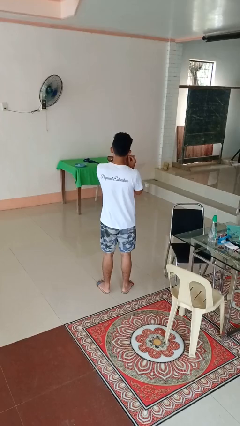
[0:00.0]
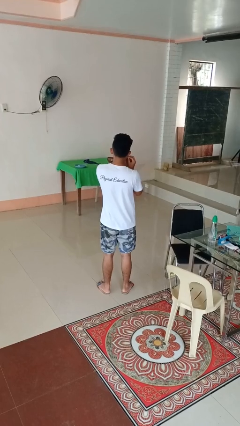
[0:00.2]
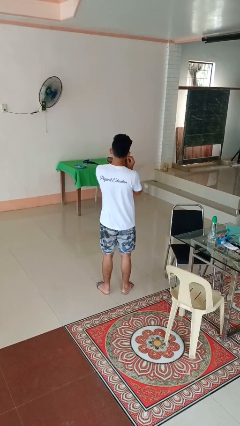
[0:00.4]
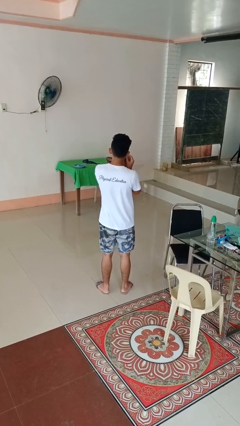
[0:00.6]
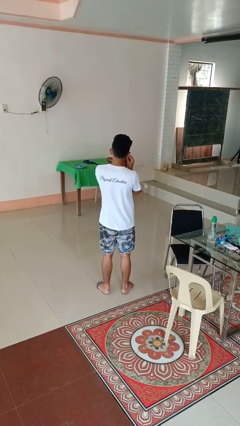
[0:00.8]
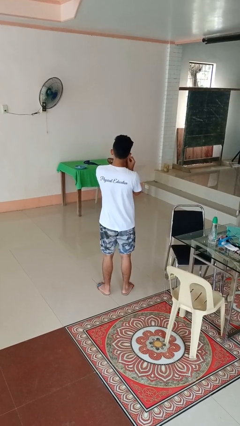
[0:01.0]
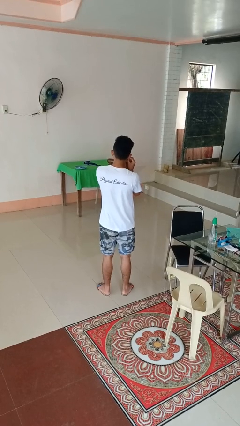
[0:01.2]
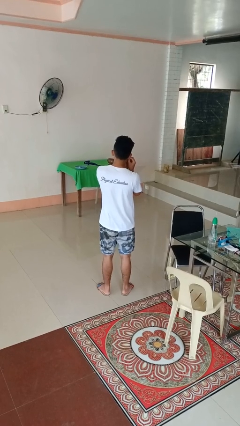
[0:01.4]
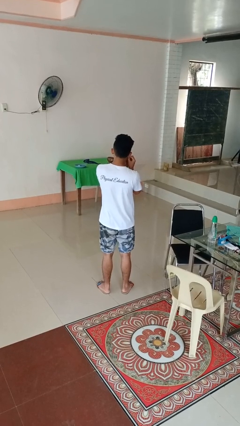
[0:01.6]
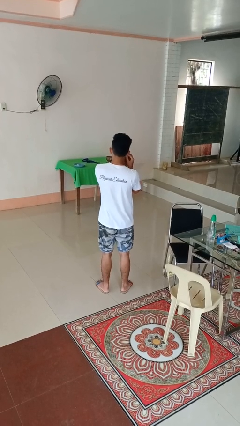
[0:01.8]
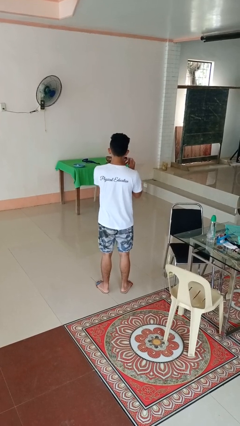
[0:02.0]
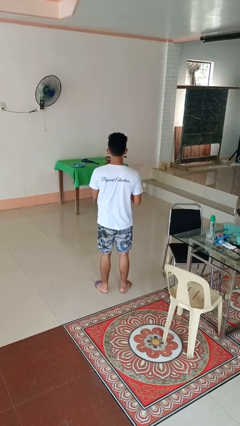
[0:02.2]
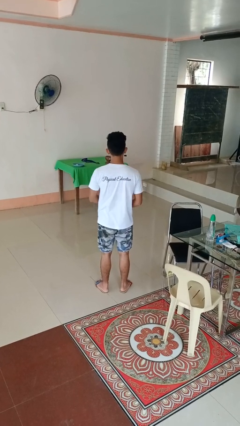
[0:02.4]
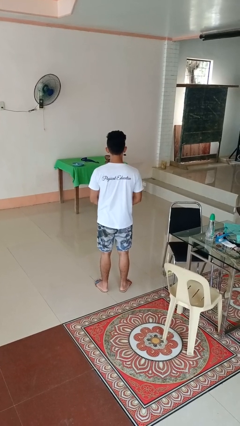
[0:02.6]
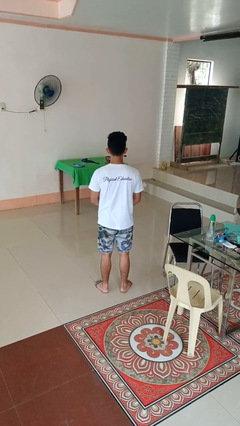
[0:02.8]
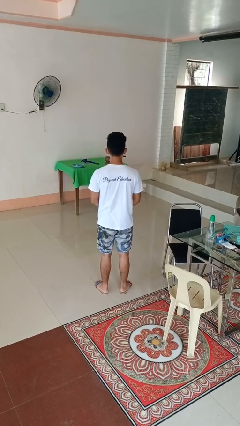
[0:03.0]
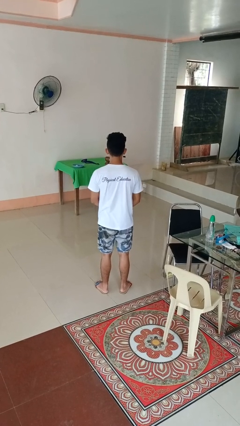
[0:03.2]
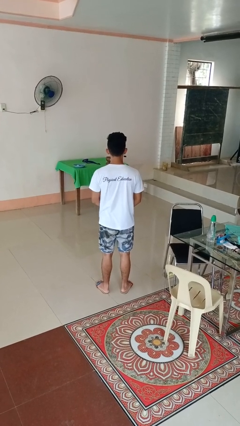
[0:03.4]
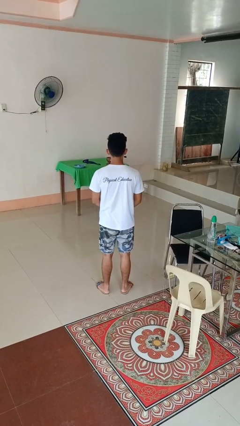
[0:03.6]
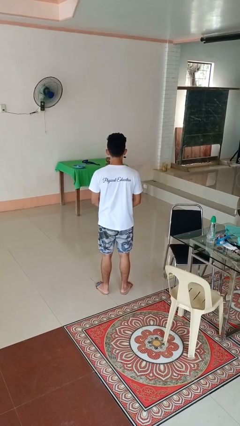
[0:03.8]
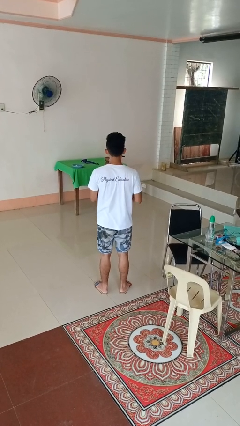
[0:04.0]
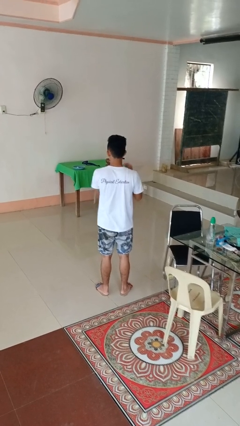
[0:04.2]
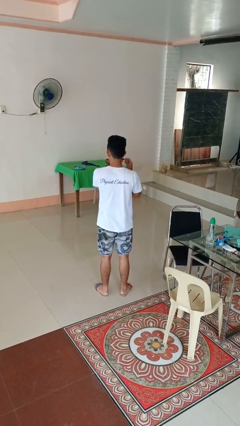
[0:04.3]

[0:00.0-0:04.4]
person puts on earrings

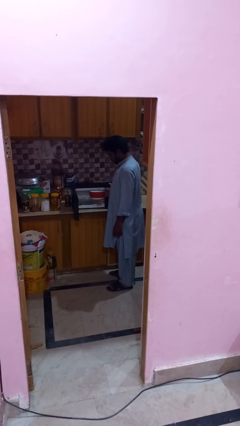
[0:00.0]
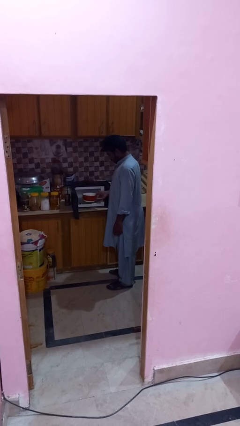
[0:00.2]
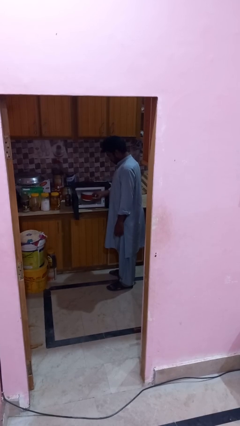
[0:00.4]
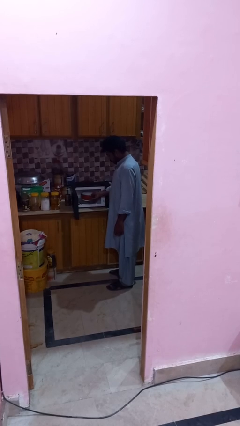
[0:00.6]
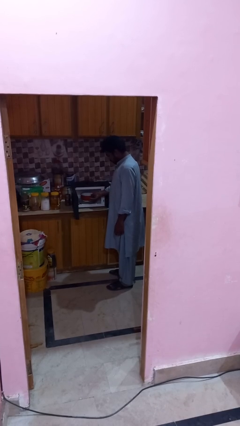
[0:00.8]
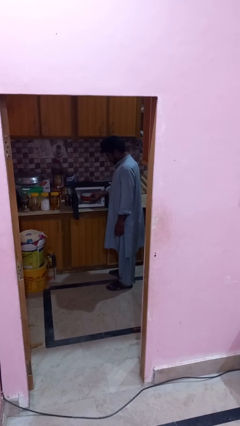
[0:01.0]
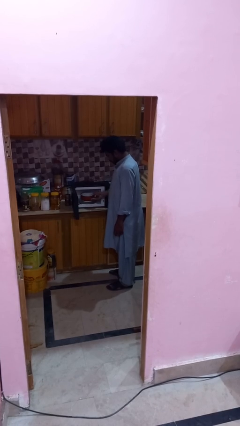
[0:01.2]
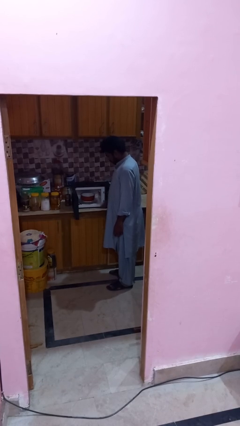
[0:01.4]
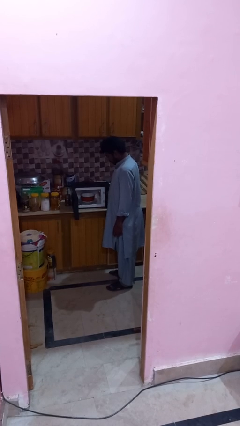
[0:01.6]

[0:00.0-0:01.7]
person puts object into microwave

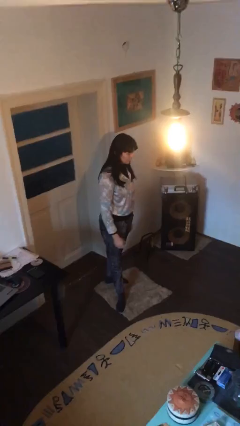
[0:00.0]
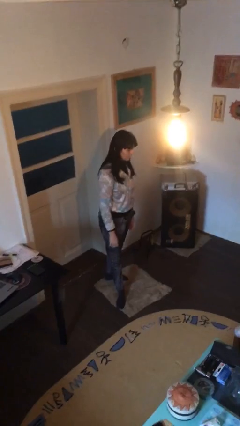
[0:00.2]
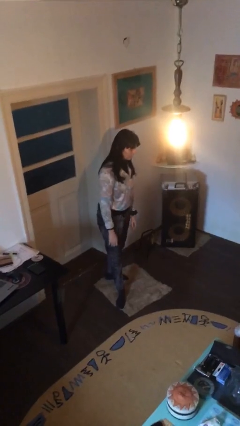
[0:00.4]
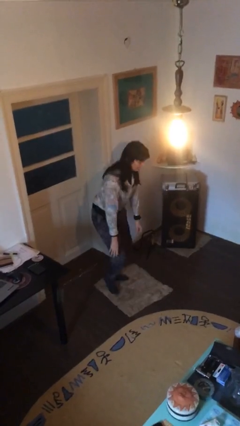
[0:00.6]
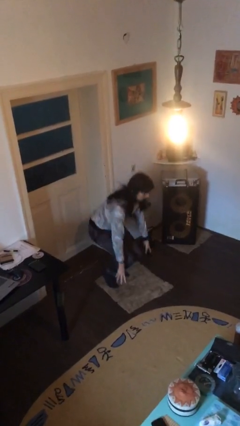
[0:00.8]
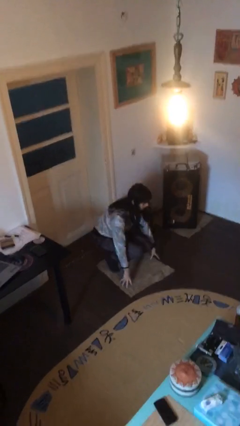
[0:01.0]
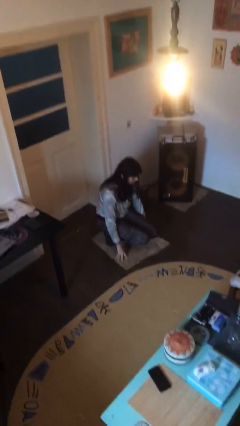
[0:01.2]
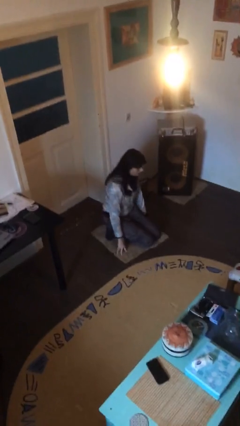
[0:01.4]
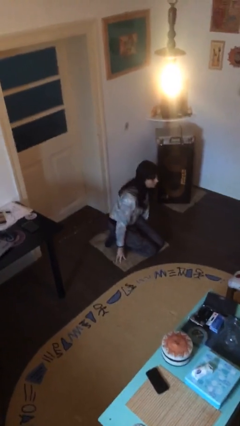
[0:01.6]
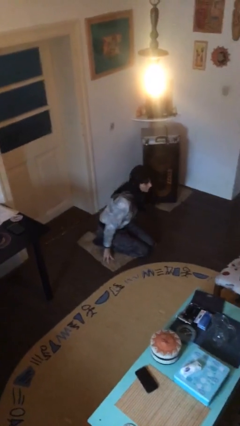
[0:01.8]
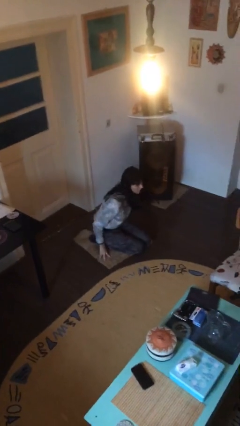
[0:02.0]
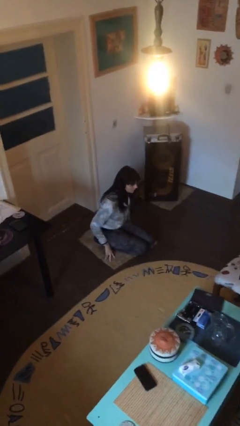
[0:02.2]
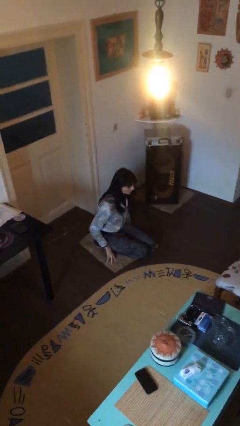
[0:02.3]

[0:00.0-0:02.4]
person sits down

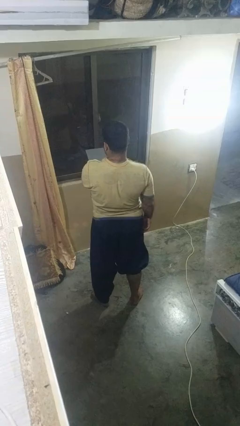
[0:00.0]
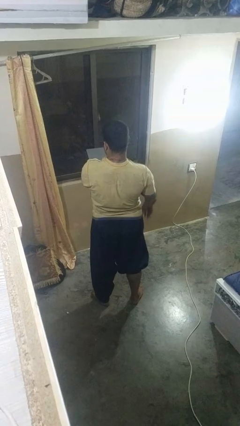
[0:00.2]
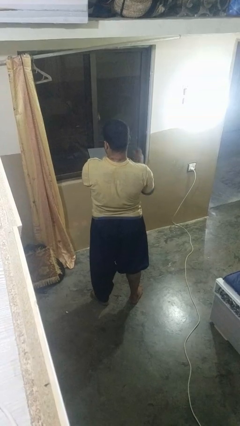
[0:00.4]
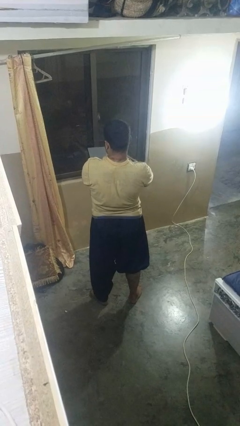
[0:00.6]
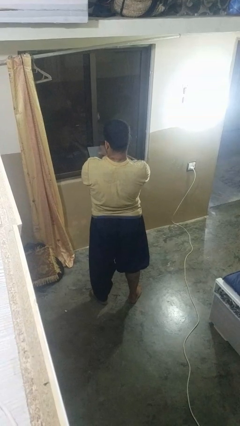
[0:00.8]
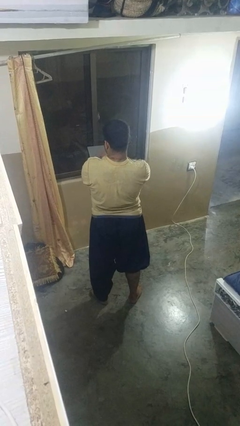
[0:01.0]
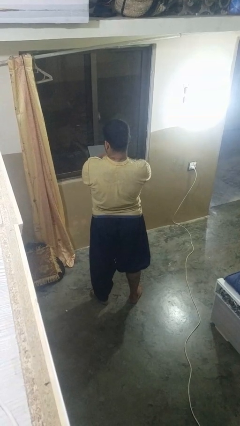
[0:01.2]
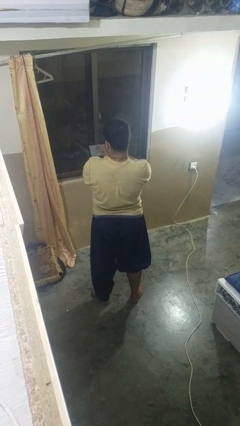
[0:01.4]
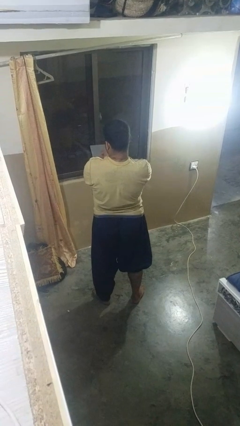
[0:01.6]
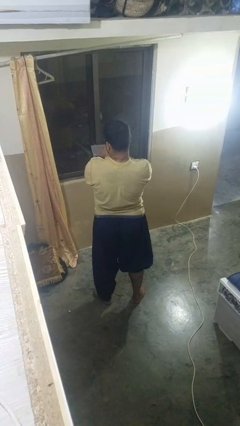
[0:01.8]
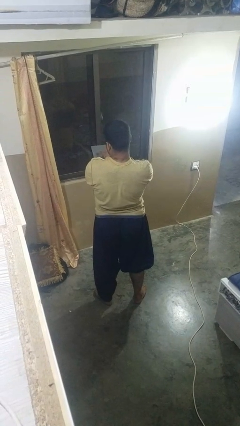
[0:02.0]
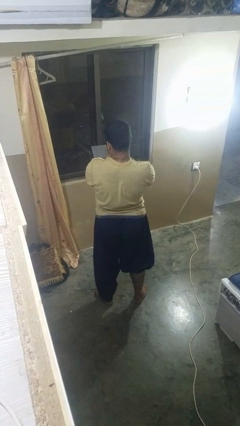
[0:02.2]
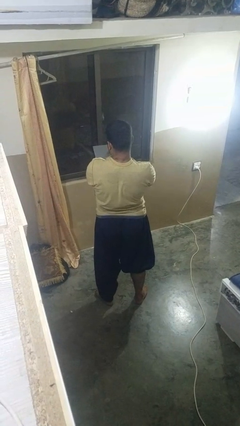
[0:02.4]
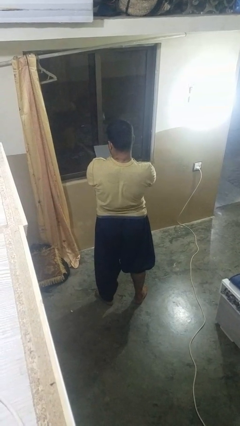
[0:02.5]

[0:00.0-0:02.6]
person interacts with tablet

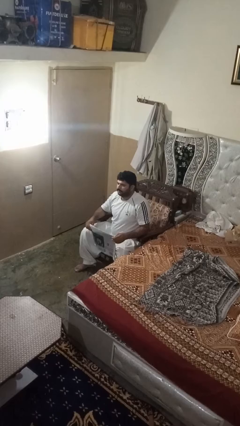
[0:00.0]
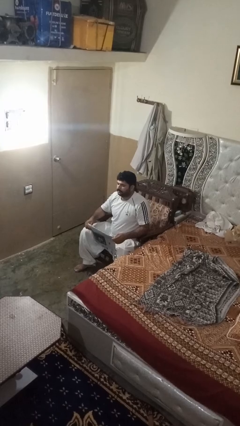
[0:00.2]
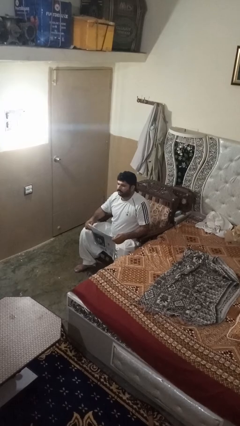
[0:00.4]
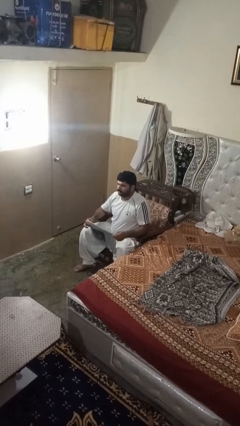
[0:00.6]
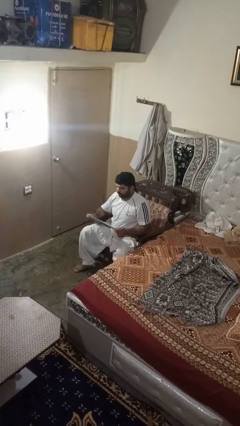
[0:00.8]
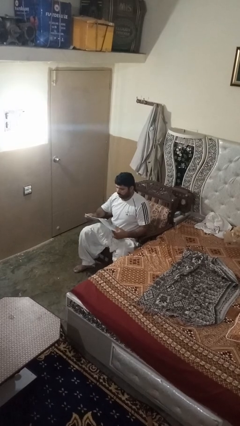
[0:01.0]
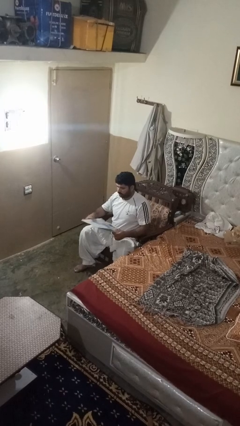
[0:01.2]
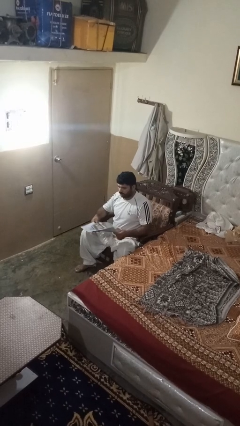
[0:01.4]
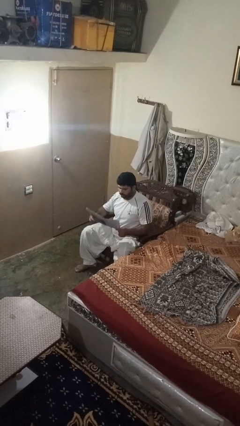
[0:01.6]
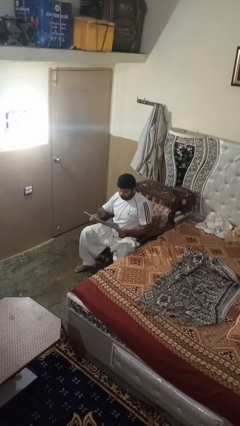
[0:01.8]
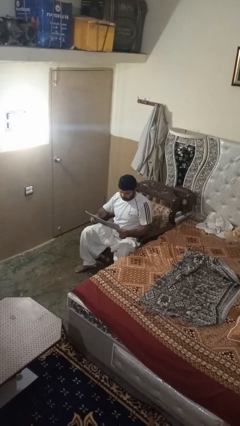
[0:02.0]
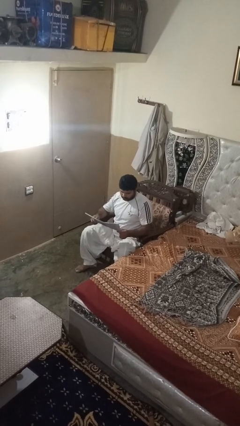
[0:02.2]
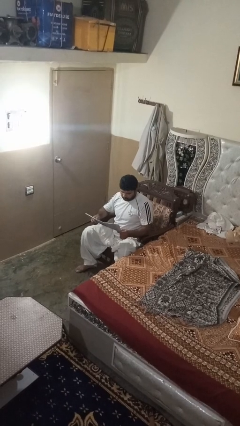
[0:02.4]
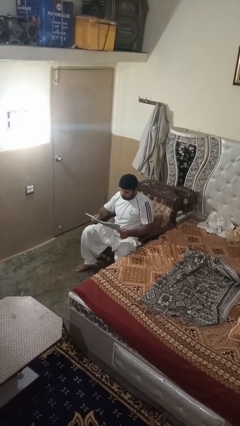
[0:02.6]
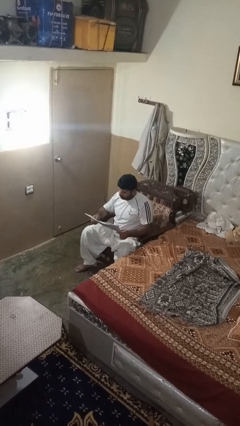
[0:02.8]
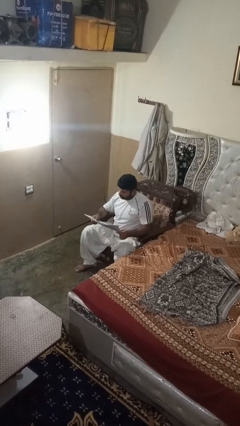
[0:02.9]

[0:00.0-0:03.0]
person reads newspaper

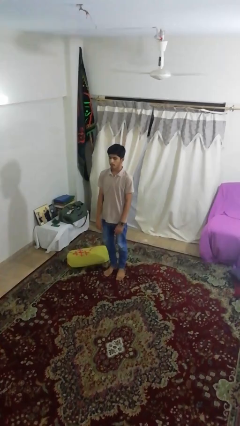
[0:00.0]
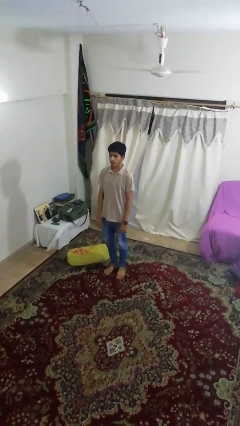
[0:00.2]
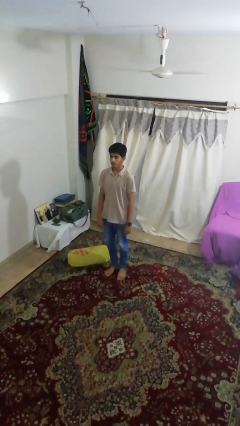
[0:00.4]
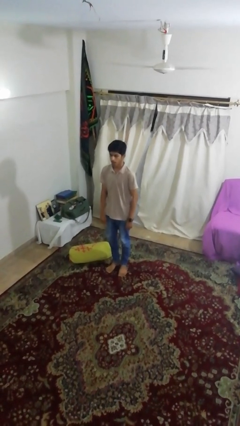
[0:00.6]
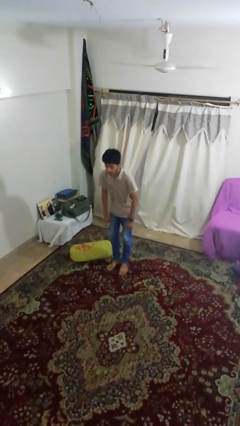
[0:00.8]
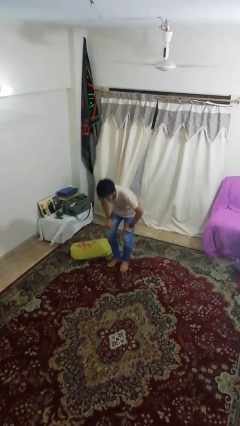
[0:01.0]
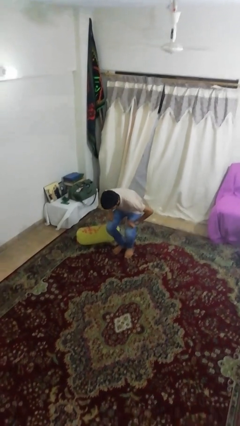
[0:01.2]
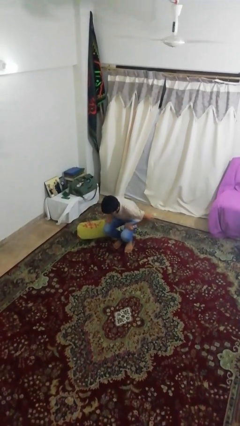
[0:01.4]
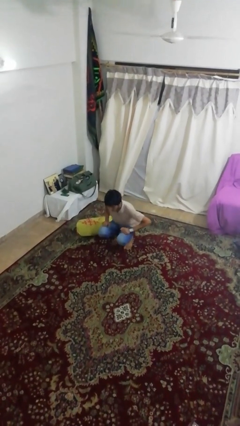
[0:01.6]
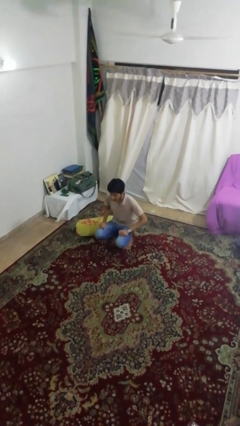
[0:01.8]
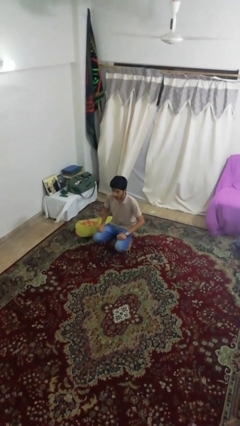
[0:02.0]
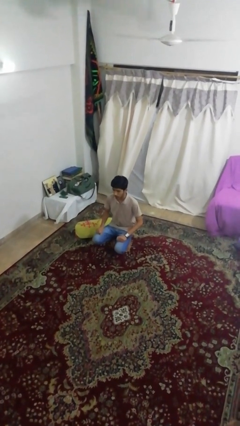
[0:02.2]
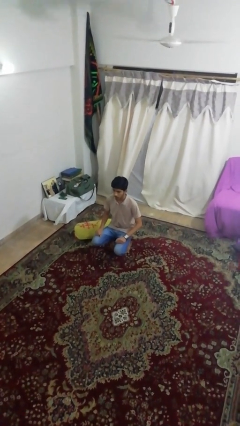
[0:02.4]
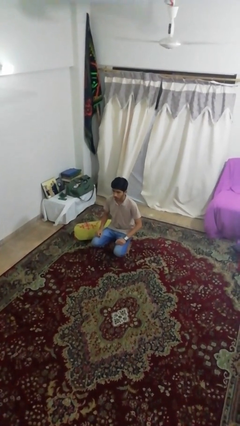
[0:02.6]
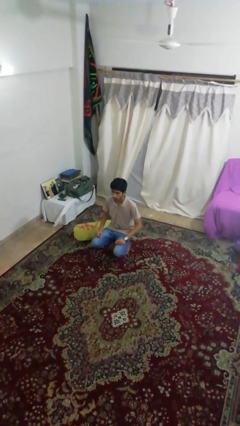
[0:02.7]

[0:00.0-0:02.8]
person squats

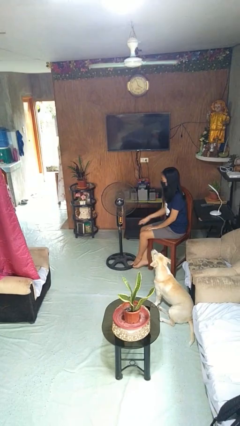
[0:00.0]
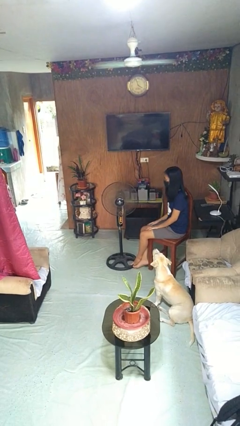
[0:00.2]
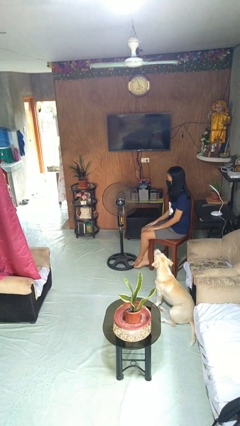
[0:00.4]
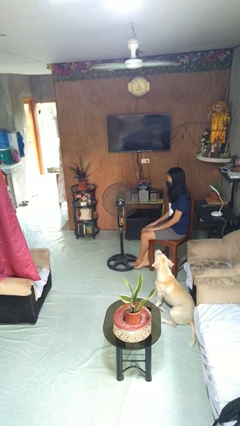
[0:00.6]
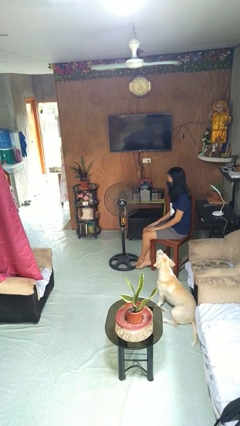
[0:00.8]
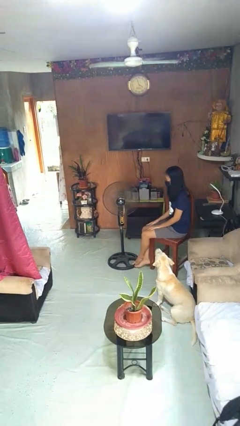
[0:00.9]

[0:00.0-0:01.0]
person turns off fan
